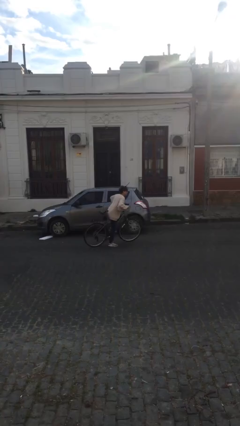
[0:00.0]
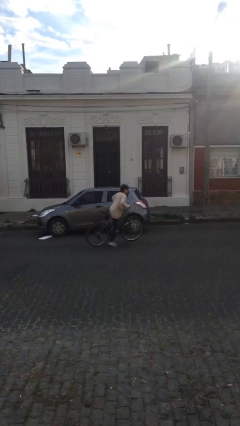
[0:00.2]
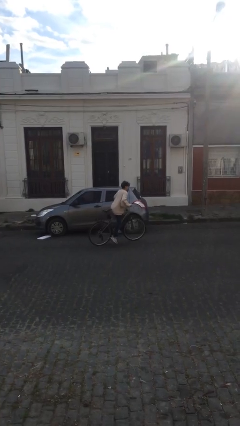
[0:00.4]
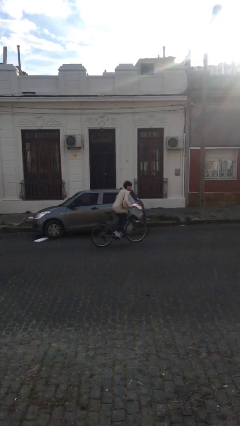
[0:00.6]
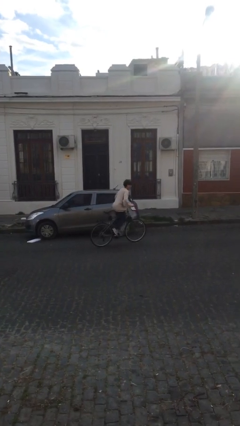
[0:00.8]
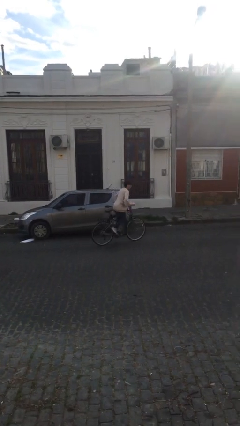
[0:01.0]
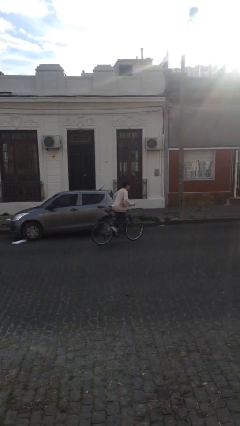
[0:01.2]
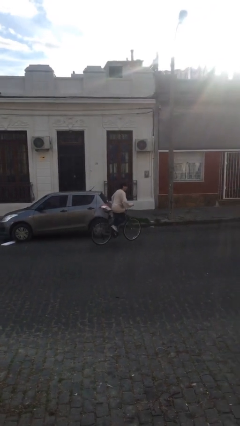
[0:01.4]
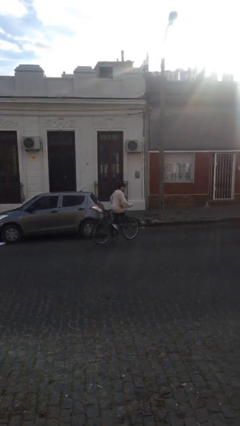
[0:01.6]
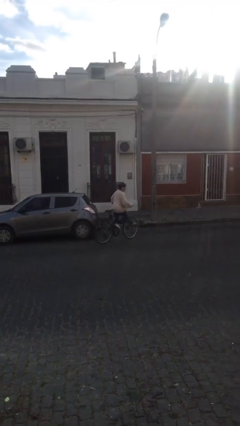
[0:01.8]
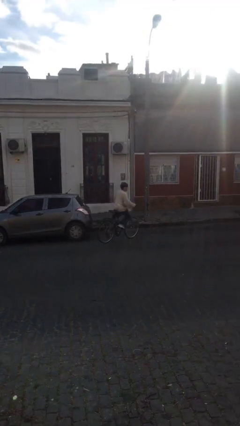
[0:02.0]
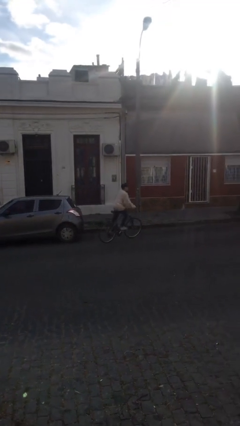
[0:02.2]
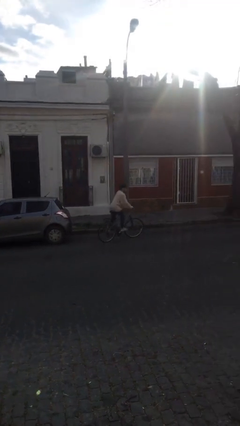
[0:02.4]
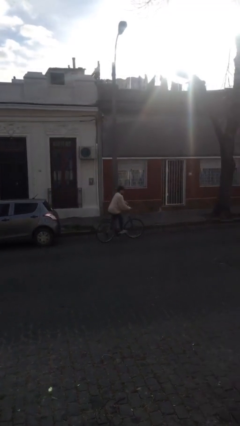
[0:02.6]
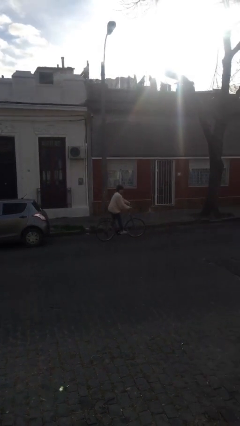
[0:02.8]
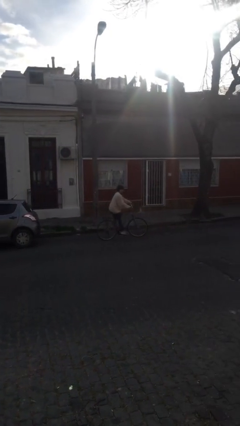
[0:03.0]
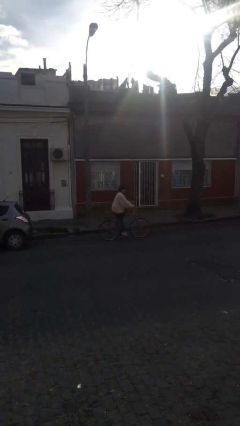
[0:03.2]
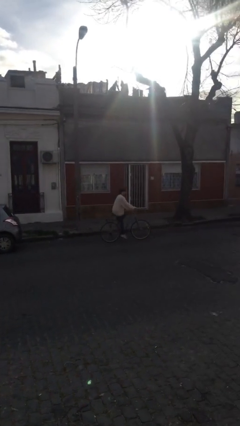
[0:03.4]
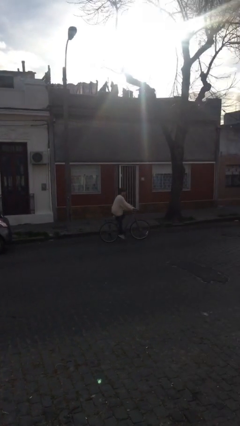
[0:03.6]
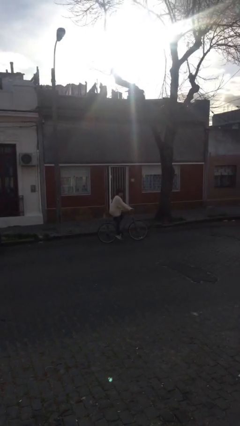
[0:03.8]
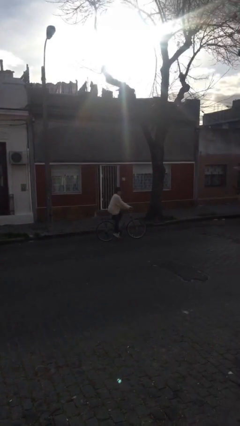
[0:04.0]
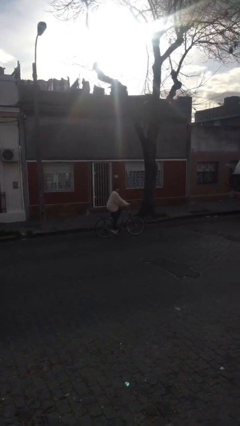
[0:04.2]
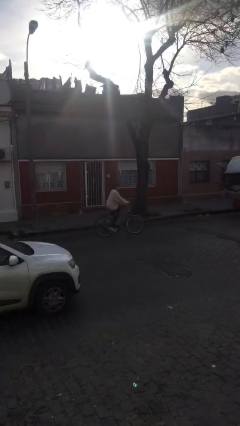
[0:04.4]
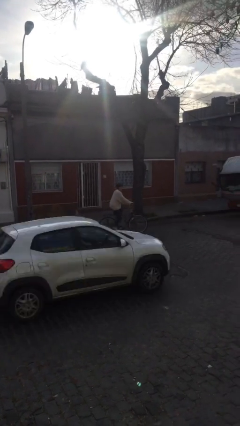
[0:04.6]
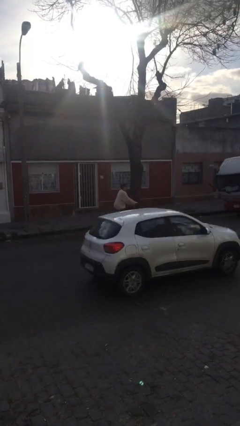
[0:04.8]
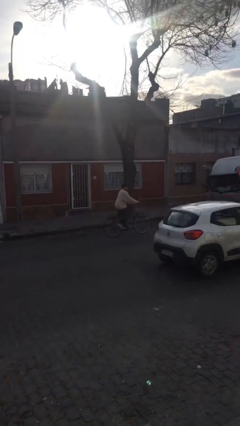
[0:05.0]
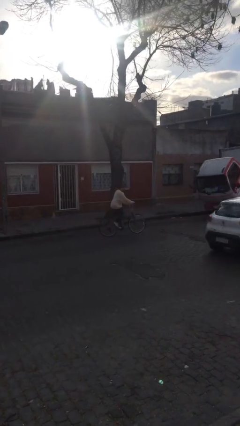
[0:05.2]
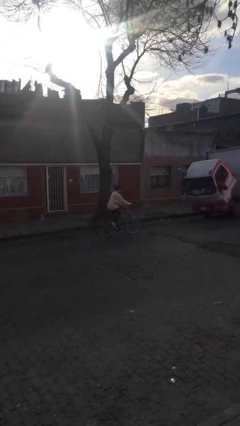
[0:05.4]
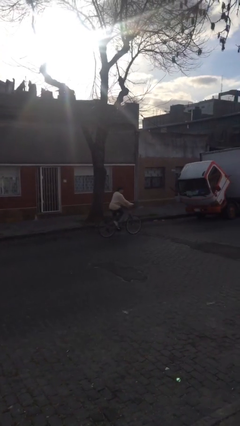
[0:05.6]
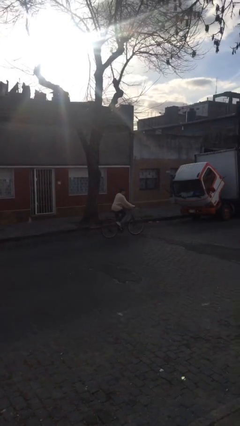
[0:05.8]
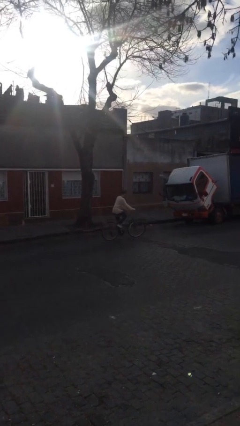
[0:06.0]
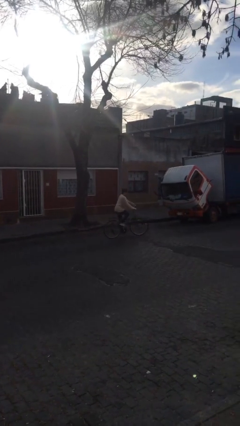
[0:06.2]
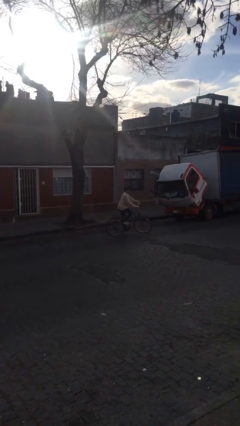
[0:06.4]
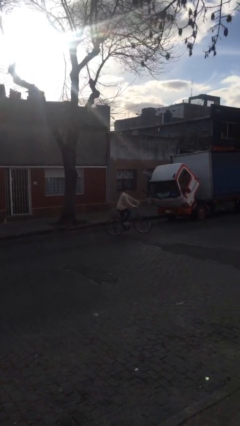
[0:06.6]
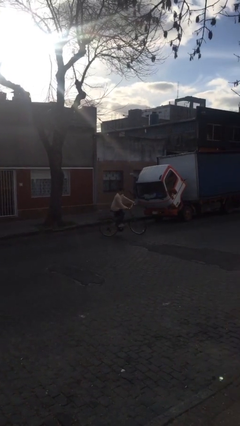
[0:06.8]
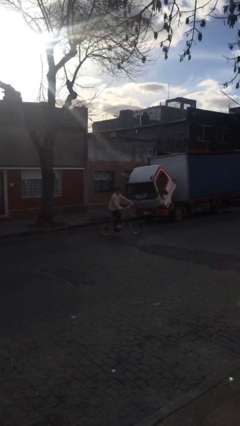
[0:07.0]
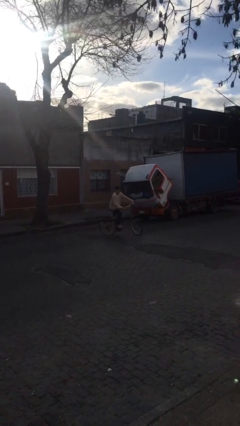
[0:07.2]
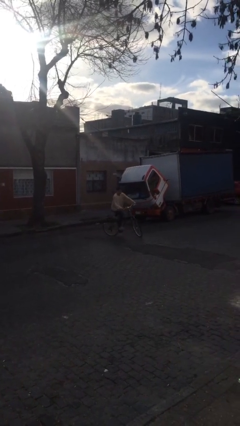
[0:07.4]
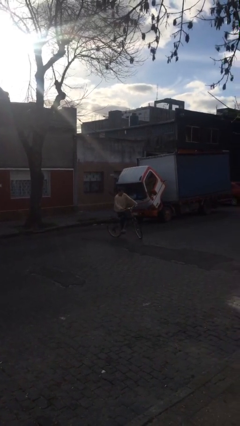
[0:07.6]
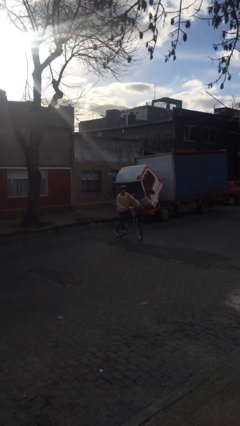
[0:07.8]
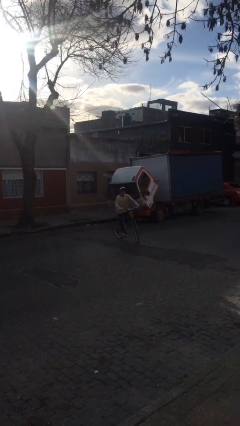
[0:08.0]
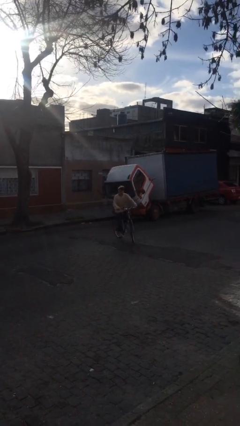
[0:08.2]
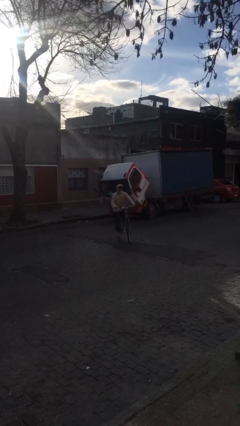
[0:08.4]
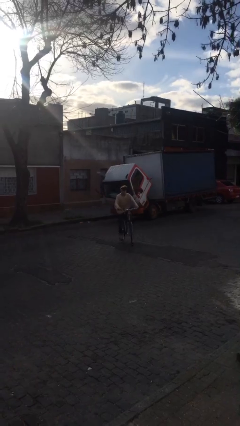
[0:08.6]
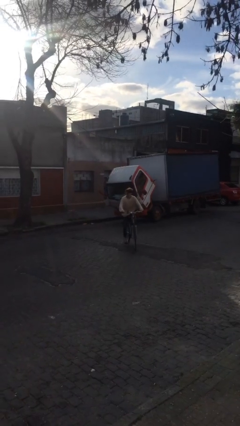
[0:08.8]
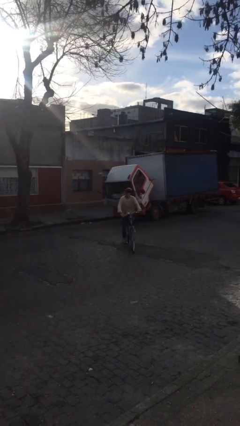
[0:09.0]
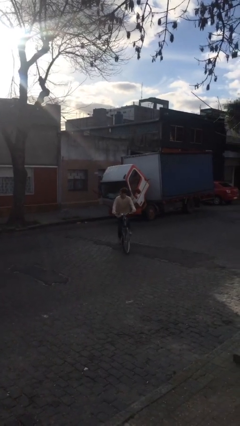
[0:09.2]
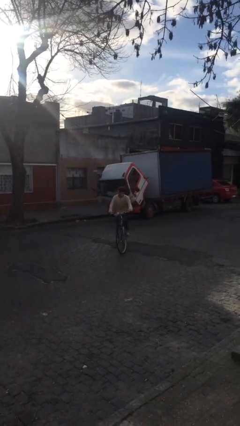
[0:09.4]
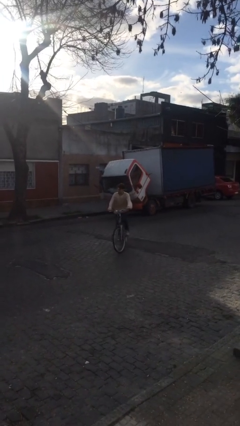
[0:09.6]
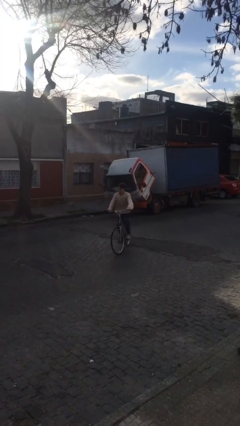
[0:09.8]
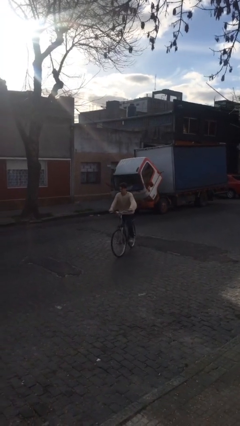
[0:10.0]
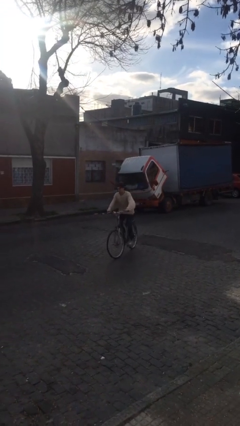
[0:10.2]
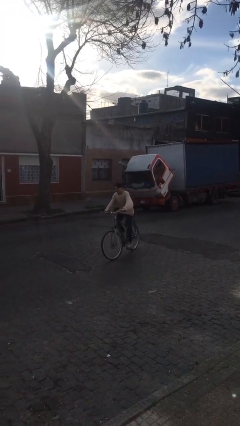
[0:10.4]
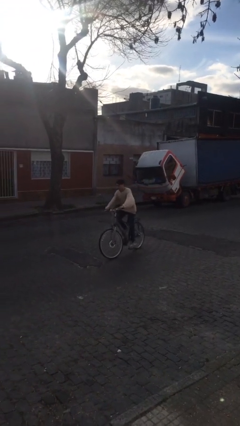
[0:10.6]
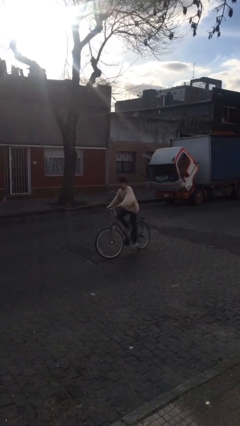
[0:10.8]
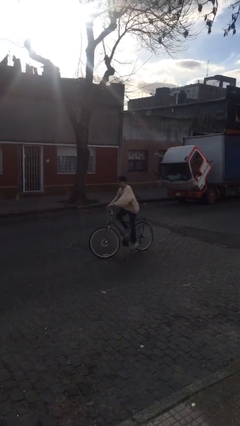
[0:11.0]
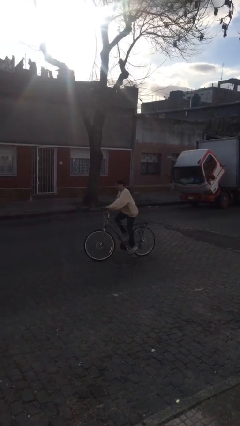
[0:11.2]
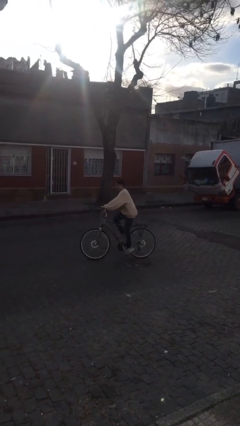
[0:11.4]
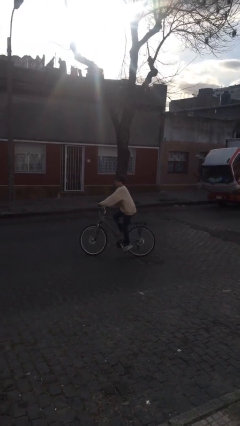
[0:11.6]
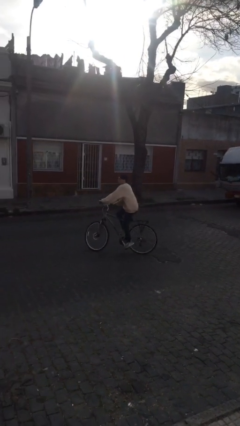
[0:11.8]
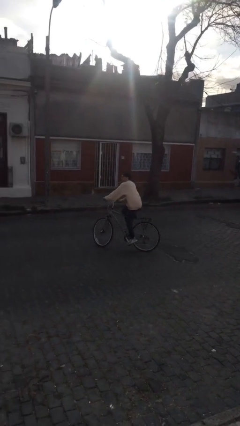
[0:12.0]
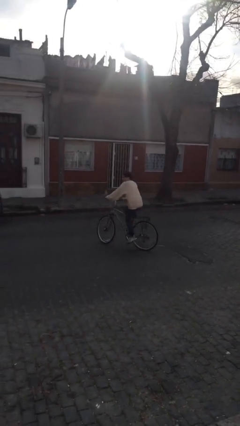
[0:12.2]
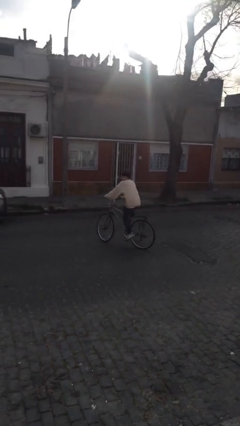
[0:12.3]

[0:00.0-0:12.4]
person rides bicycle

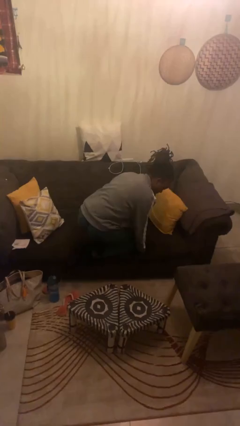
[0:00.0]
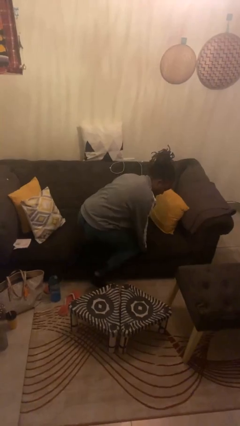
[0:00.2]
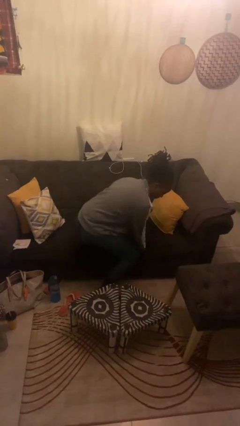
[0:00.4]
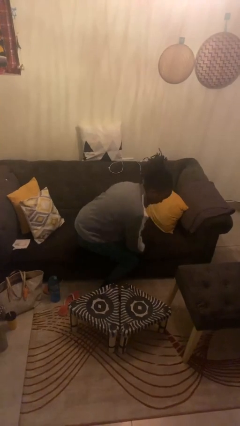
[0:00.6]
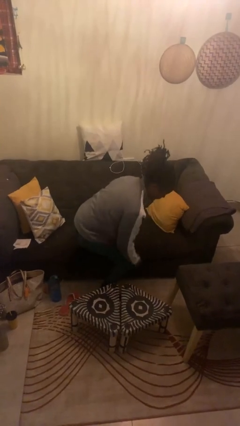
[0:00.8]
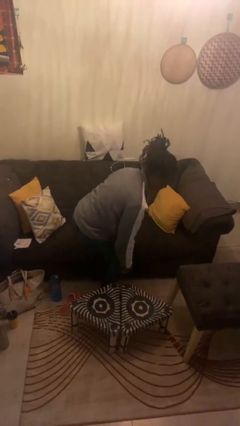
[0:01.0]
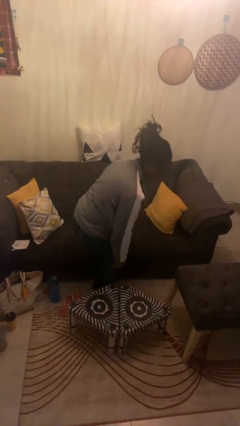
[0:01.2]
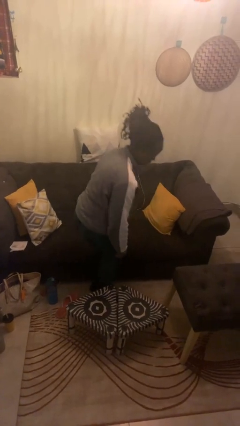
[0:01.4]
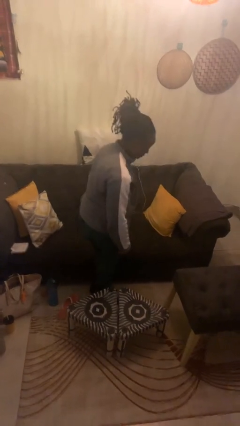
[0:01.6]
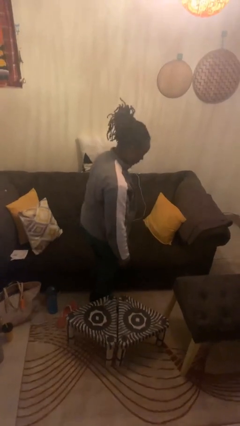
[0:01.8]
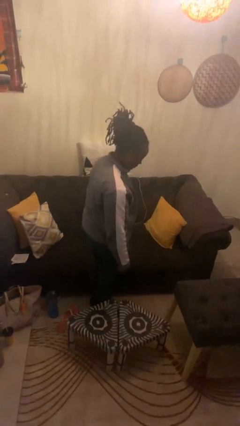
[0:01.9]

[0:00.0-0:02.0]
person climbs off couch

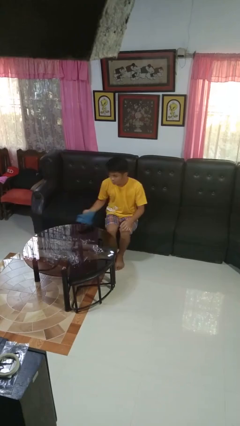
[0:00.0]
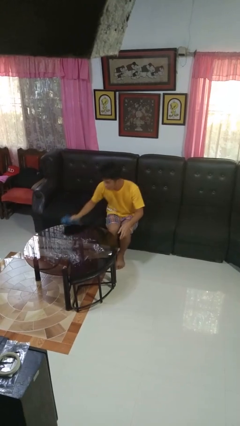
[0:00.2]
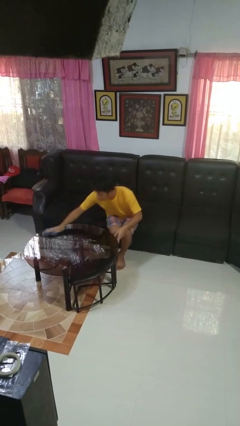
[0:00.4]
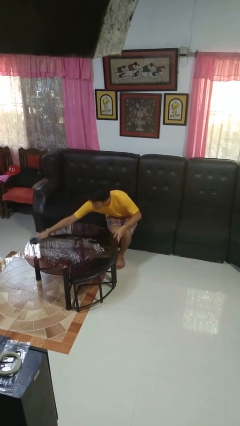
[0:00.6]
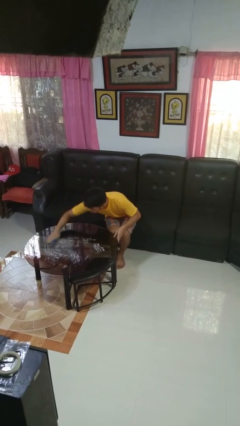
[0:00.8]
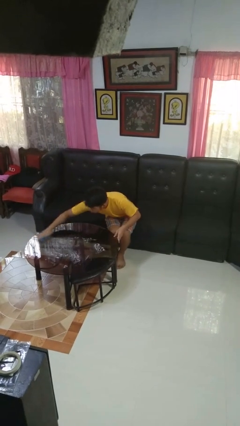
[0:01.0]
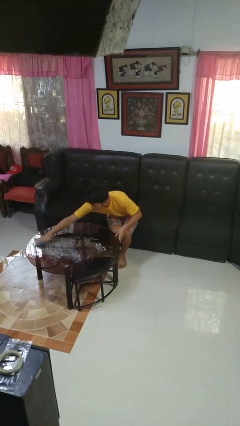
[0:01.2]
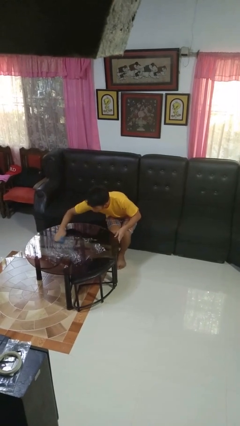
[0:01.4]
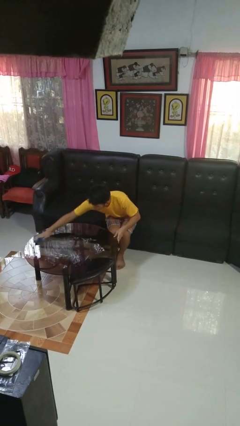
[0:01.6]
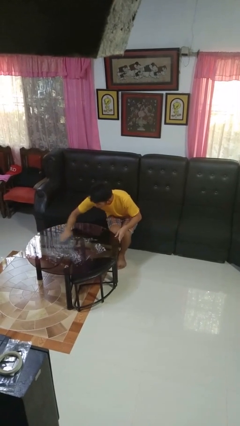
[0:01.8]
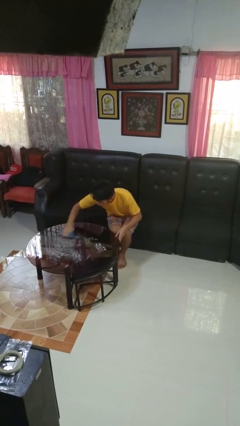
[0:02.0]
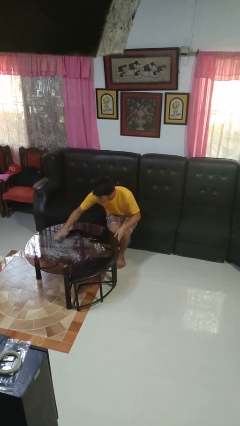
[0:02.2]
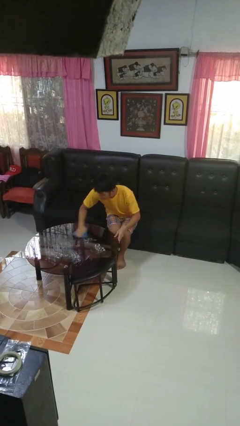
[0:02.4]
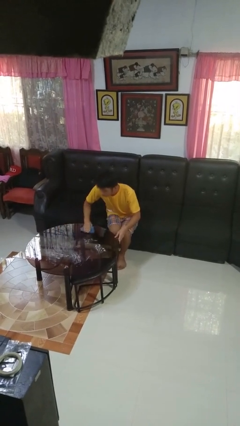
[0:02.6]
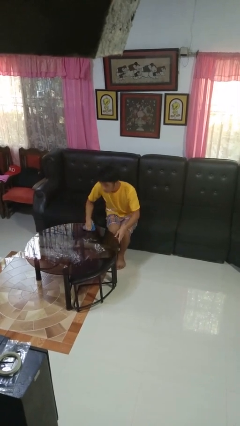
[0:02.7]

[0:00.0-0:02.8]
person cleans table with rag

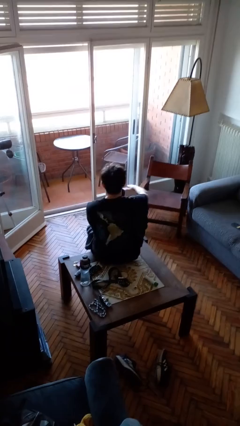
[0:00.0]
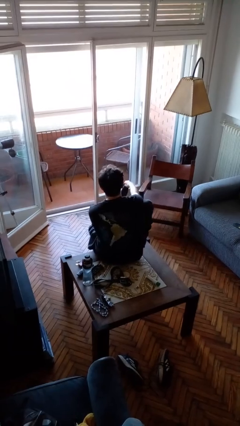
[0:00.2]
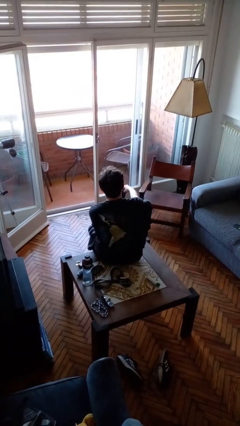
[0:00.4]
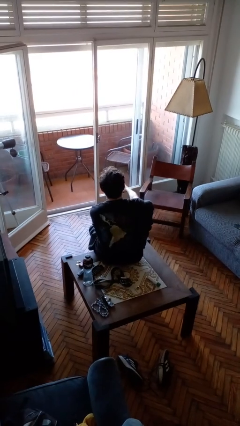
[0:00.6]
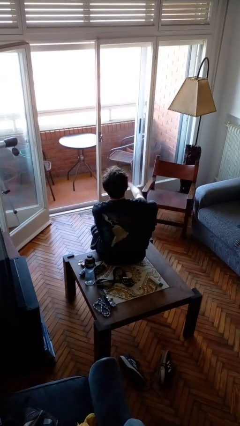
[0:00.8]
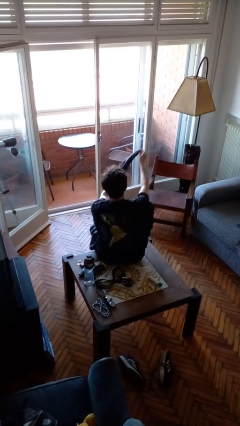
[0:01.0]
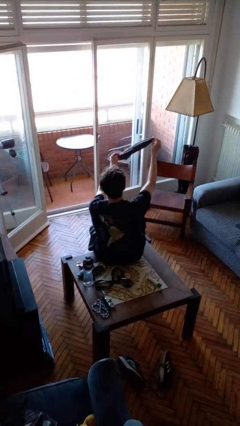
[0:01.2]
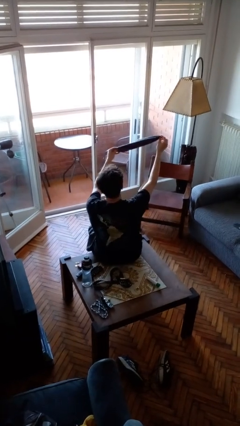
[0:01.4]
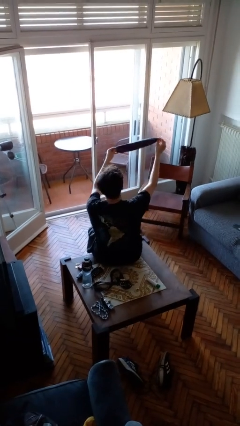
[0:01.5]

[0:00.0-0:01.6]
person takes off socks
